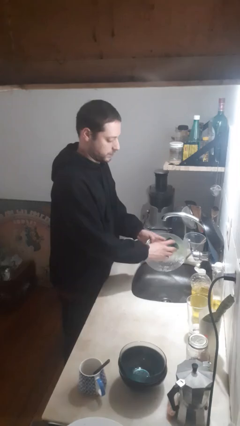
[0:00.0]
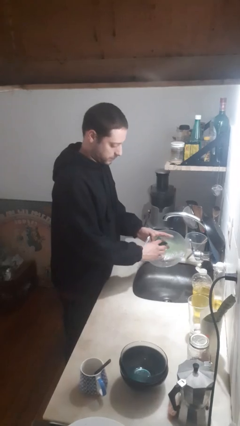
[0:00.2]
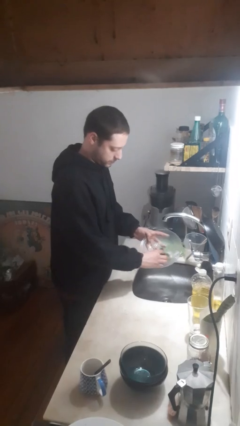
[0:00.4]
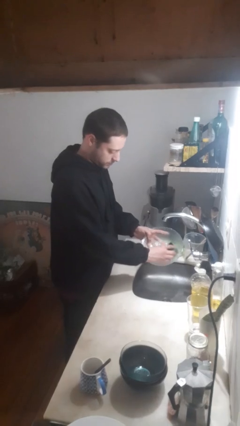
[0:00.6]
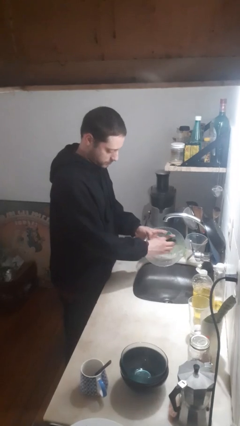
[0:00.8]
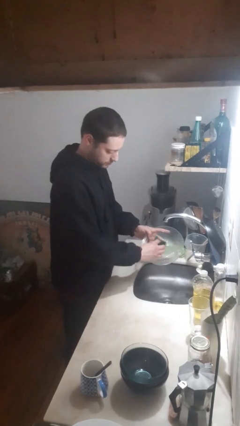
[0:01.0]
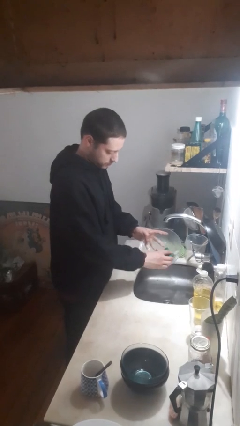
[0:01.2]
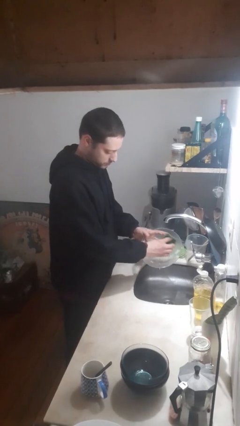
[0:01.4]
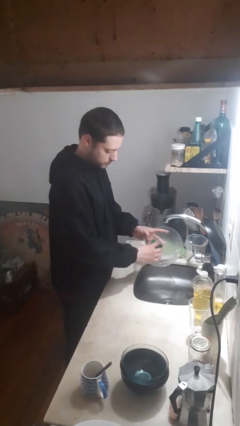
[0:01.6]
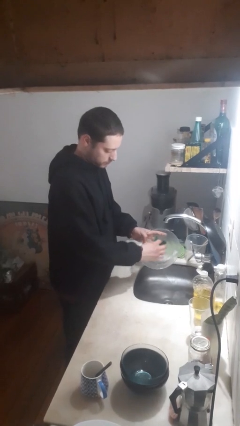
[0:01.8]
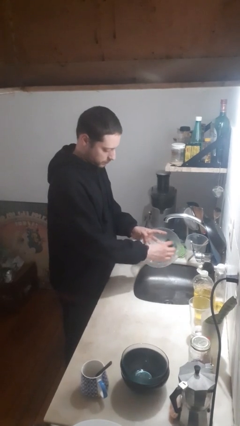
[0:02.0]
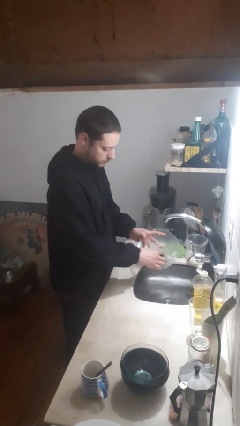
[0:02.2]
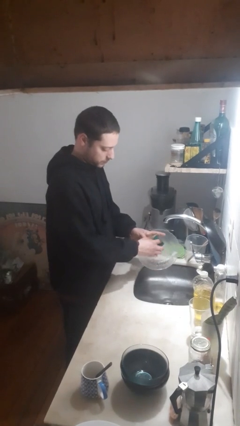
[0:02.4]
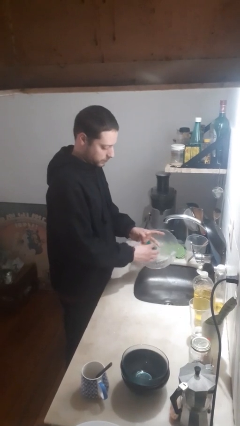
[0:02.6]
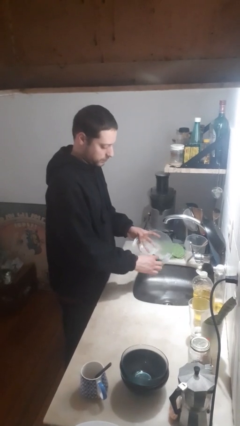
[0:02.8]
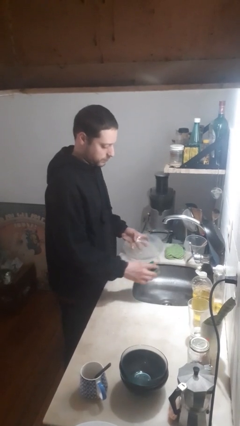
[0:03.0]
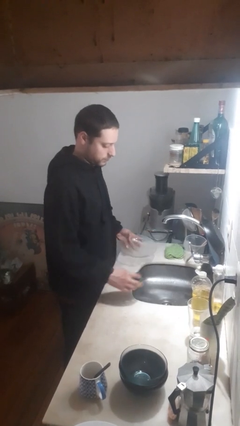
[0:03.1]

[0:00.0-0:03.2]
person washes dish

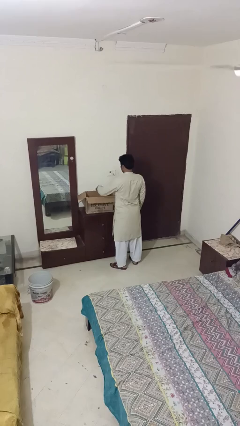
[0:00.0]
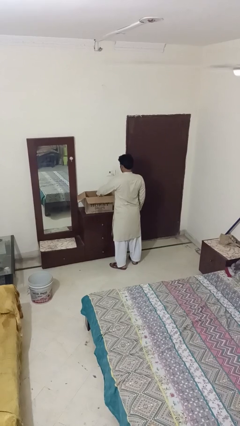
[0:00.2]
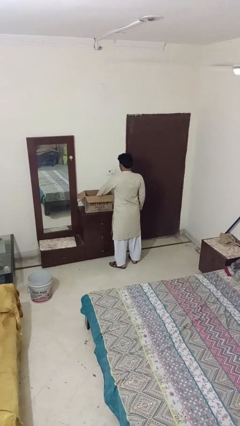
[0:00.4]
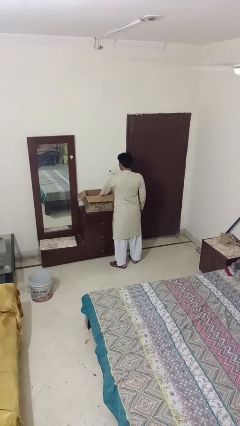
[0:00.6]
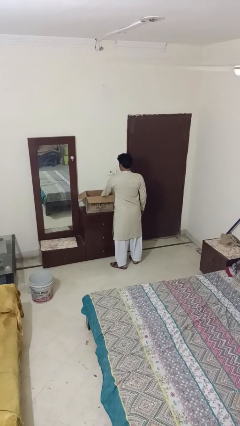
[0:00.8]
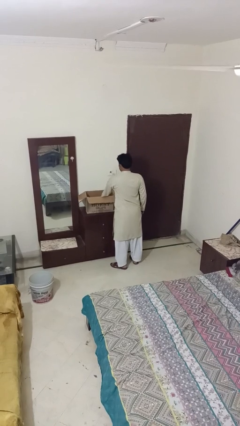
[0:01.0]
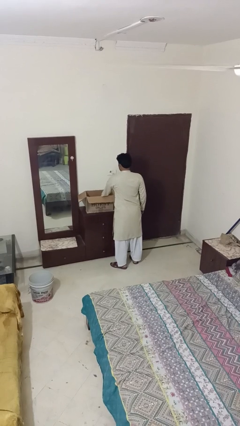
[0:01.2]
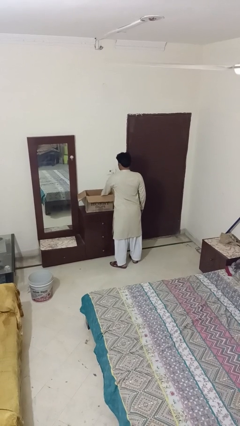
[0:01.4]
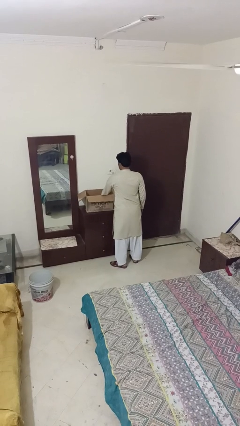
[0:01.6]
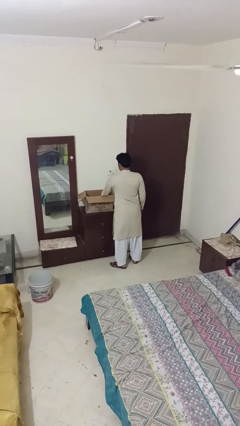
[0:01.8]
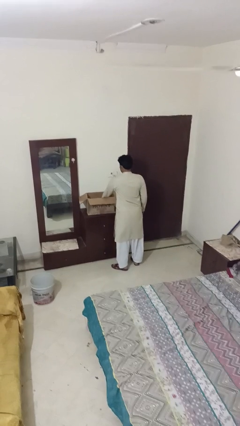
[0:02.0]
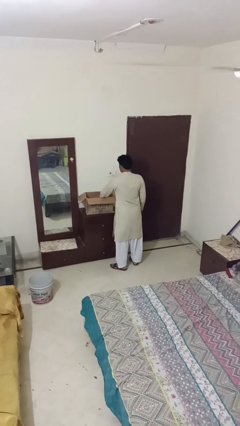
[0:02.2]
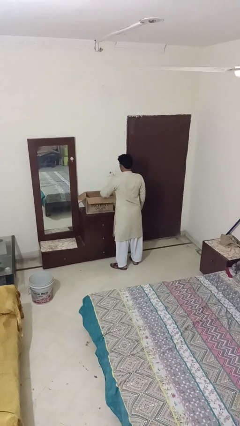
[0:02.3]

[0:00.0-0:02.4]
person puts object into box

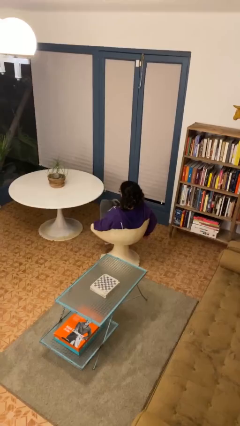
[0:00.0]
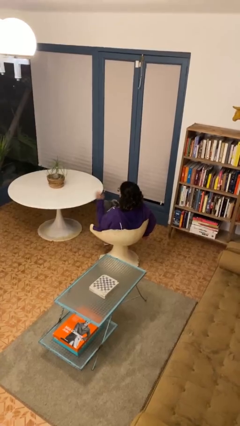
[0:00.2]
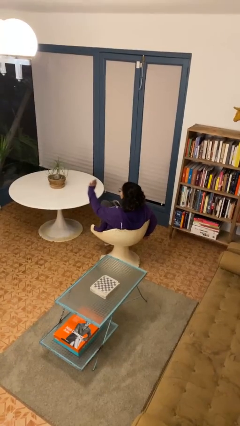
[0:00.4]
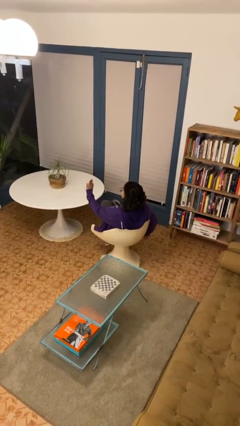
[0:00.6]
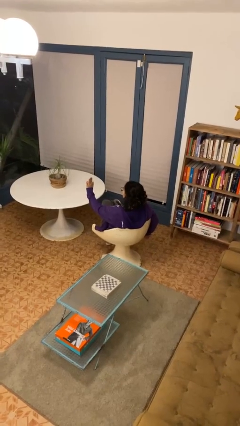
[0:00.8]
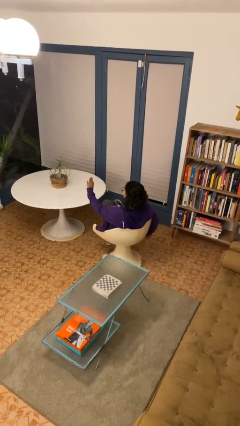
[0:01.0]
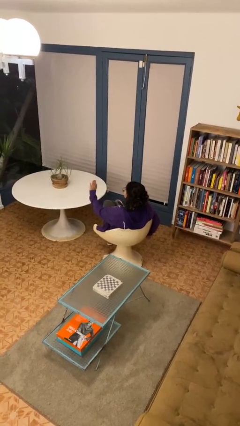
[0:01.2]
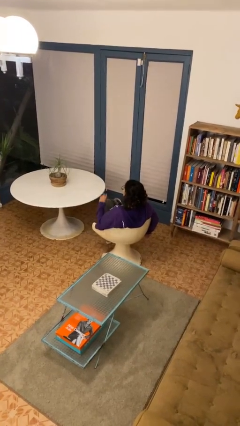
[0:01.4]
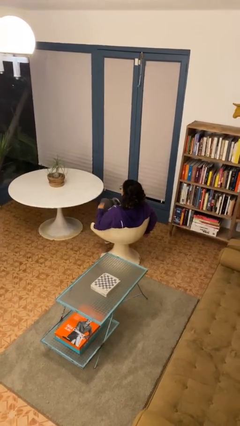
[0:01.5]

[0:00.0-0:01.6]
person gestures stop

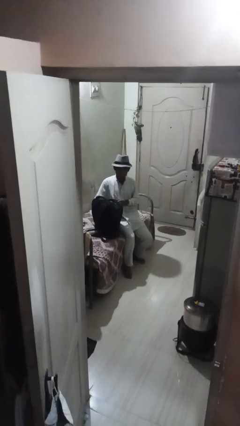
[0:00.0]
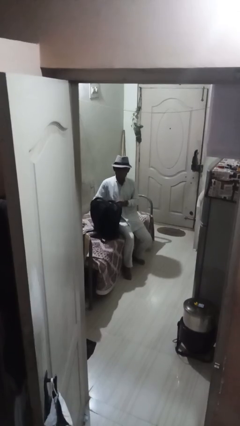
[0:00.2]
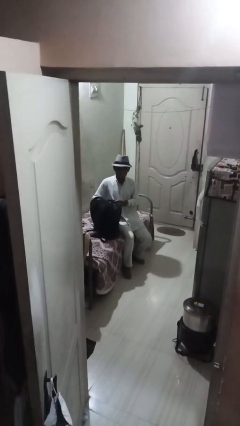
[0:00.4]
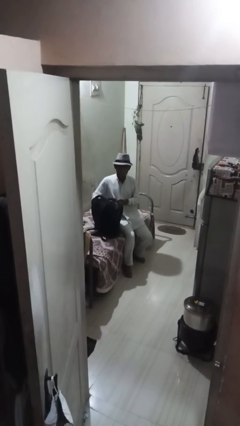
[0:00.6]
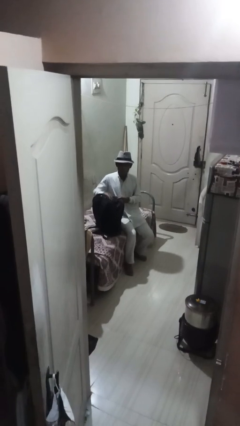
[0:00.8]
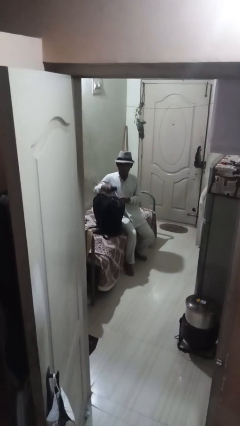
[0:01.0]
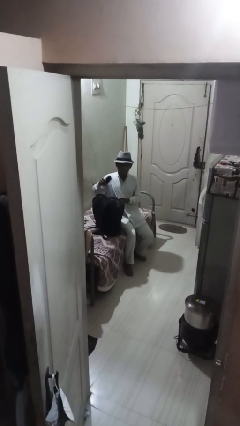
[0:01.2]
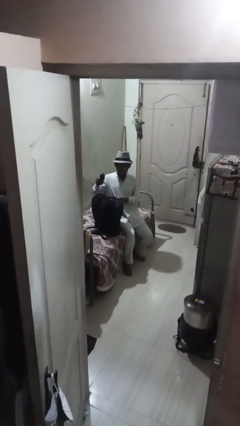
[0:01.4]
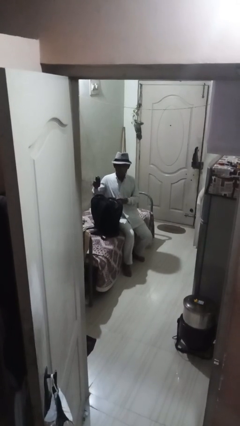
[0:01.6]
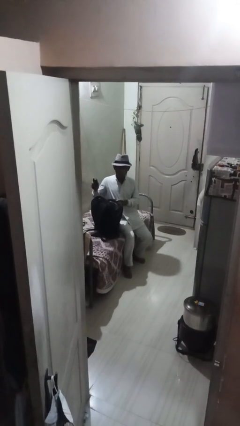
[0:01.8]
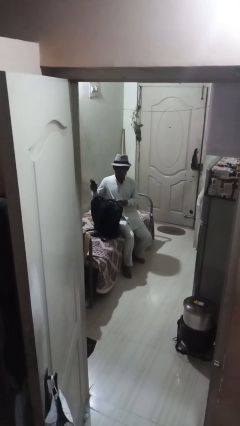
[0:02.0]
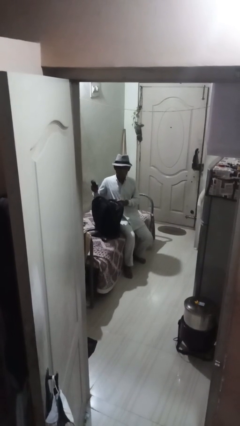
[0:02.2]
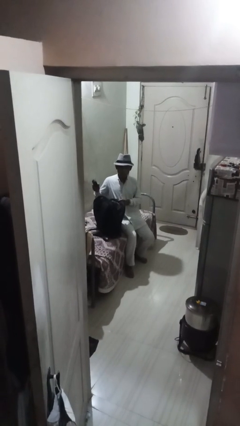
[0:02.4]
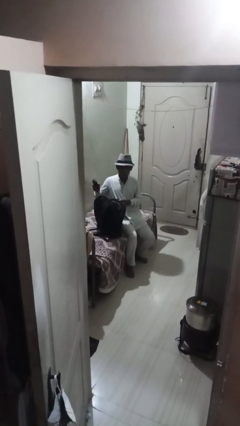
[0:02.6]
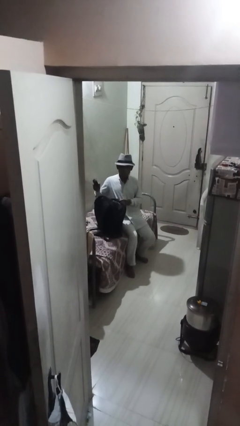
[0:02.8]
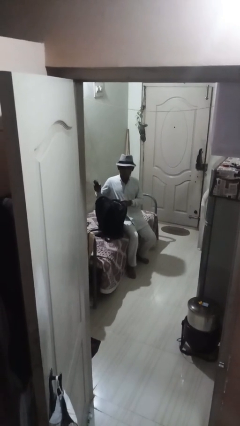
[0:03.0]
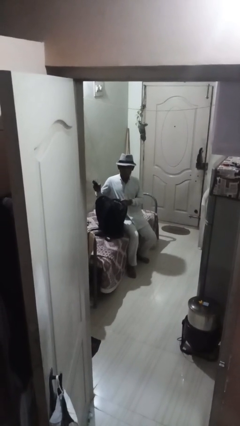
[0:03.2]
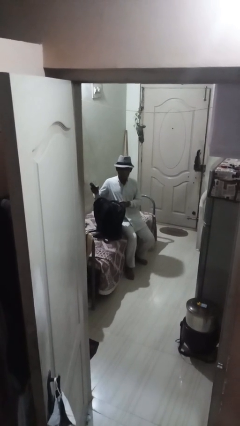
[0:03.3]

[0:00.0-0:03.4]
person takes object from backpack

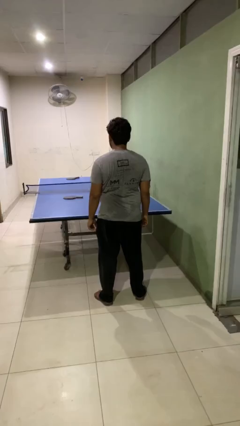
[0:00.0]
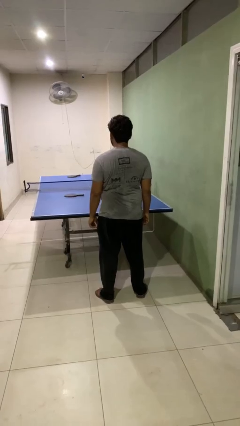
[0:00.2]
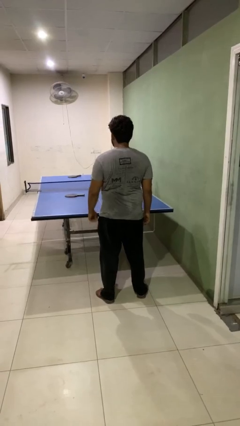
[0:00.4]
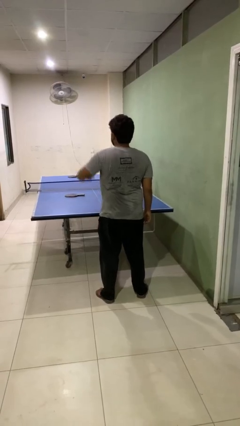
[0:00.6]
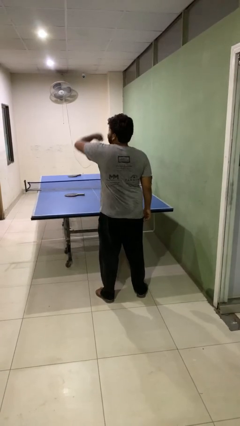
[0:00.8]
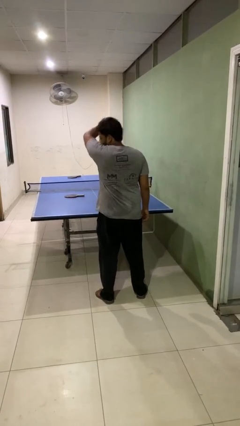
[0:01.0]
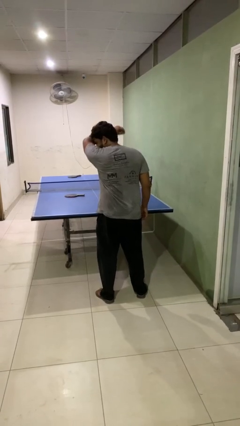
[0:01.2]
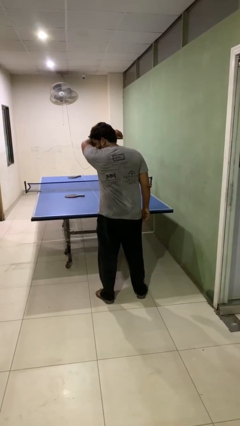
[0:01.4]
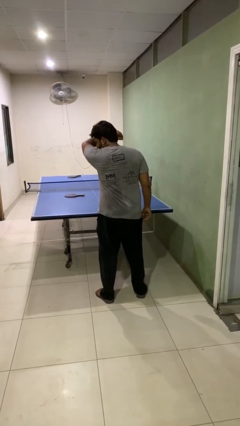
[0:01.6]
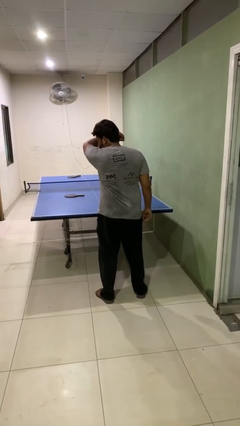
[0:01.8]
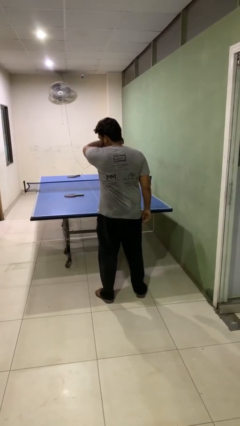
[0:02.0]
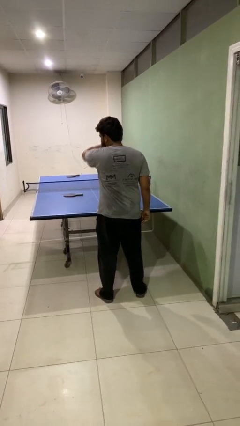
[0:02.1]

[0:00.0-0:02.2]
person sneezes into arm

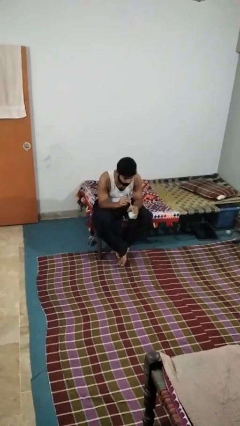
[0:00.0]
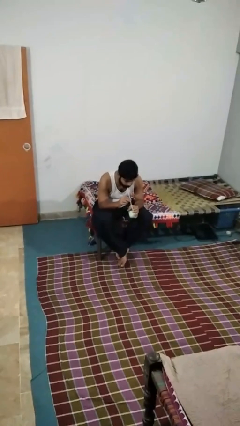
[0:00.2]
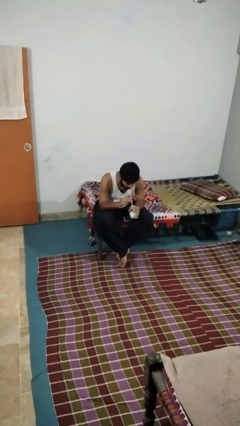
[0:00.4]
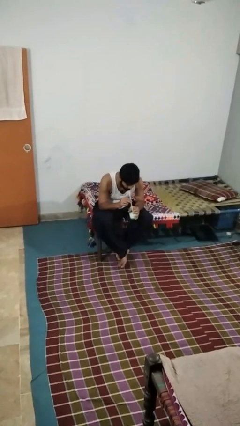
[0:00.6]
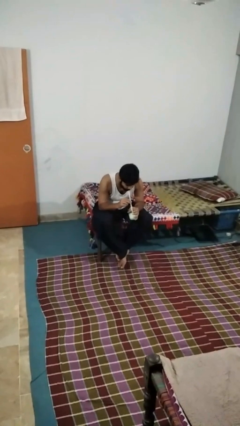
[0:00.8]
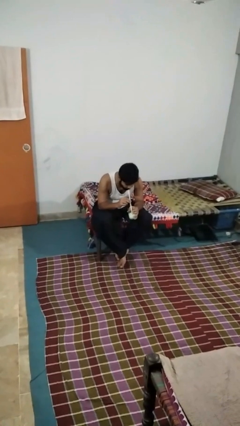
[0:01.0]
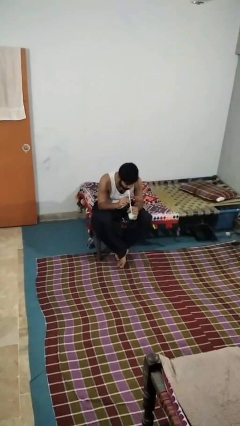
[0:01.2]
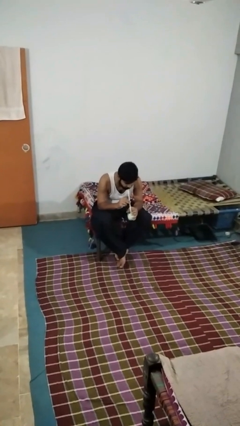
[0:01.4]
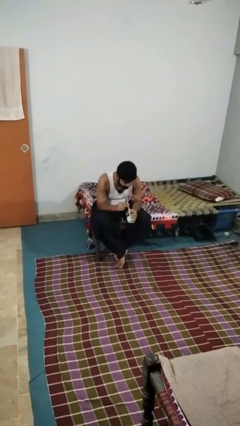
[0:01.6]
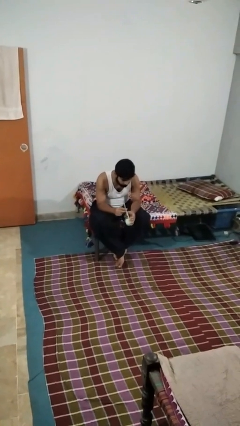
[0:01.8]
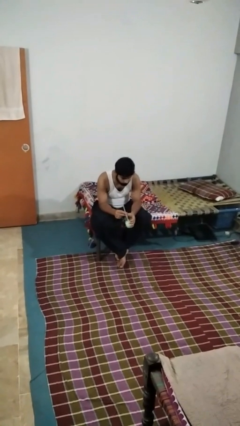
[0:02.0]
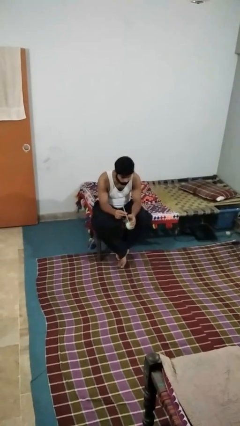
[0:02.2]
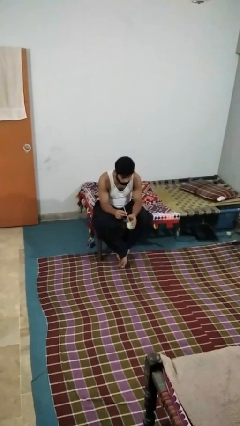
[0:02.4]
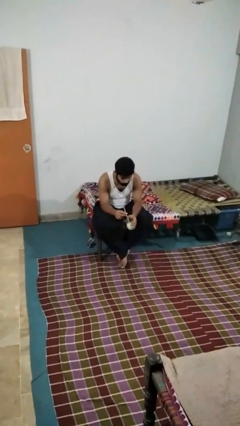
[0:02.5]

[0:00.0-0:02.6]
person drinks from straw

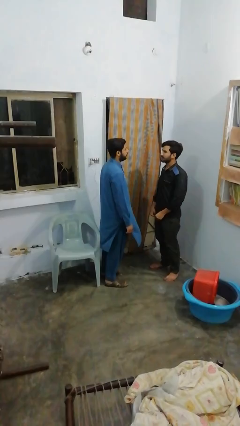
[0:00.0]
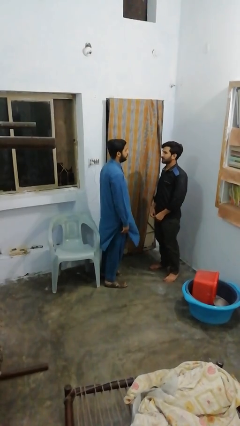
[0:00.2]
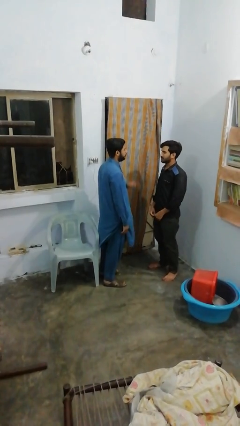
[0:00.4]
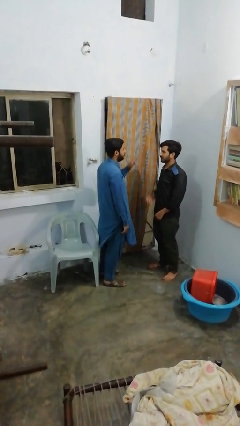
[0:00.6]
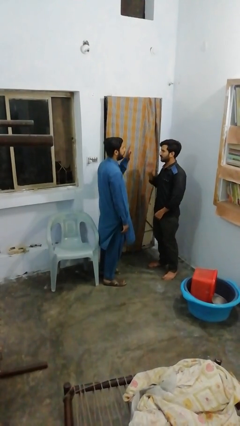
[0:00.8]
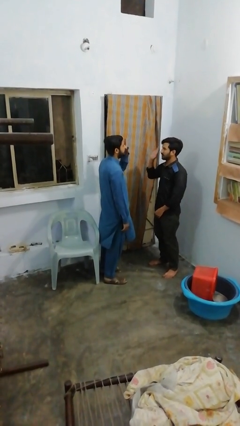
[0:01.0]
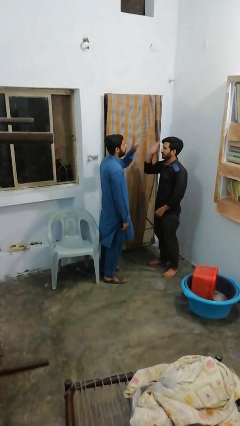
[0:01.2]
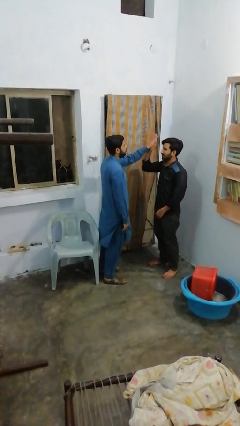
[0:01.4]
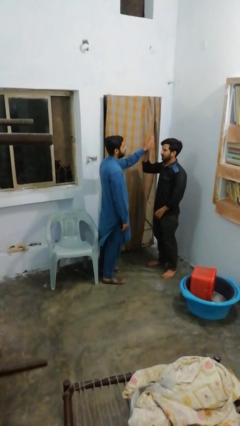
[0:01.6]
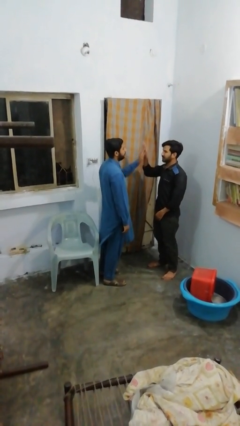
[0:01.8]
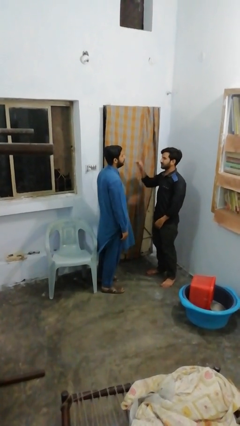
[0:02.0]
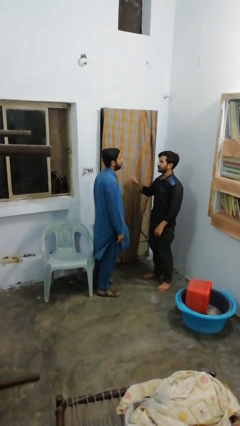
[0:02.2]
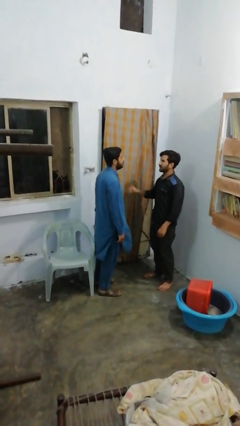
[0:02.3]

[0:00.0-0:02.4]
person highfives hand
